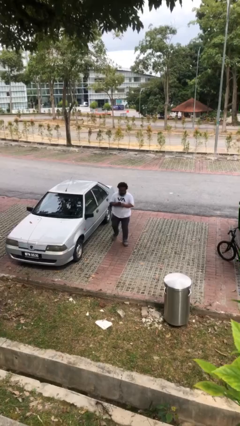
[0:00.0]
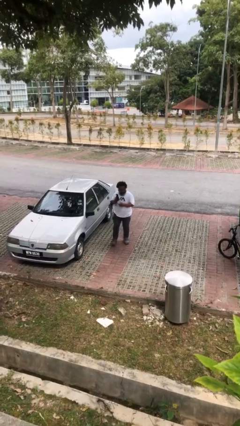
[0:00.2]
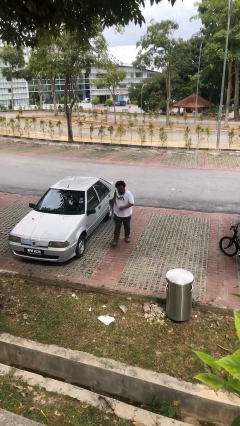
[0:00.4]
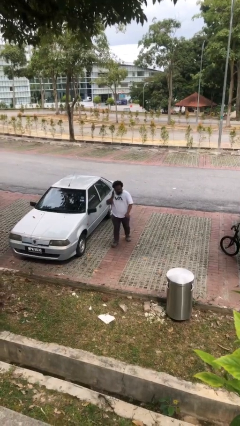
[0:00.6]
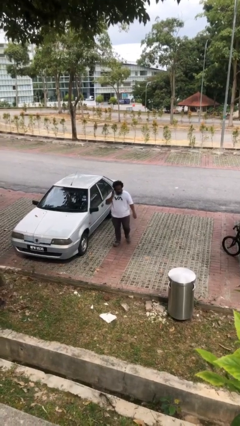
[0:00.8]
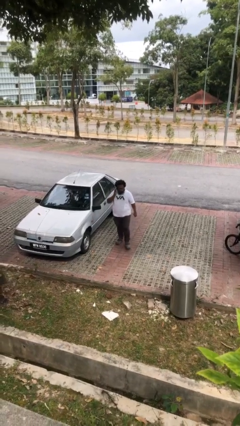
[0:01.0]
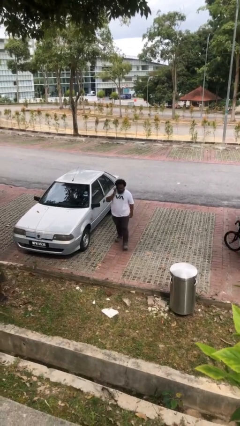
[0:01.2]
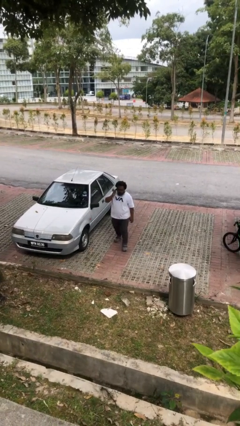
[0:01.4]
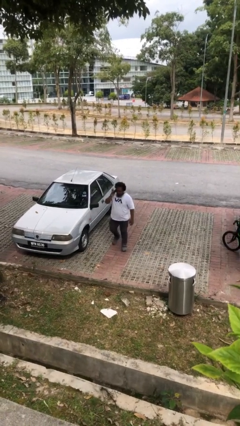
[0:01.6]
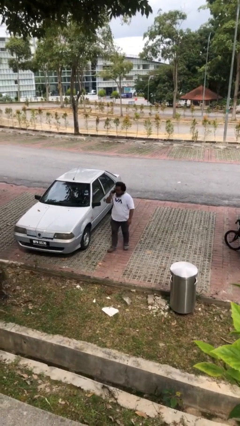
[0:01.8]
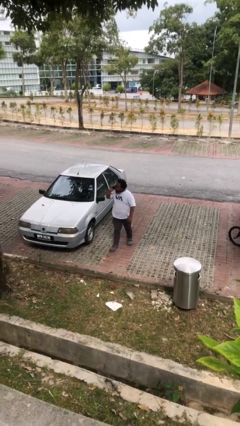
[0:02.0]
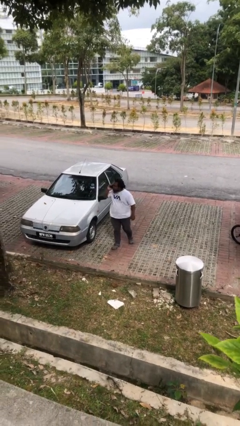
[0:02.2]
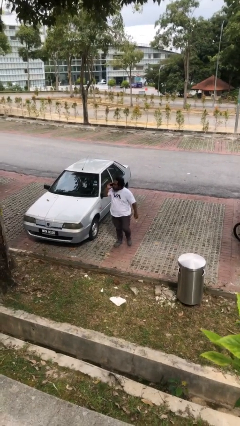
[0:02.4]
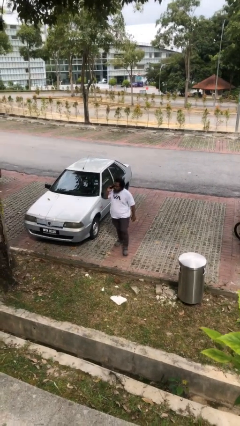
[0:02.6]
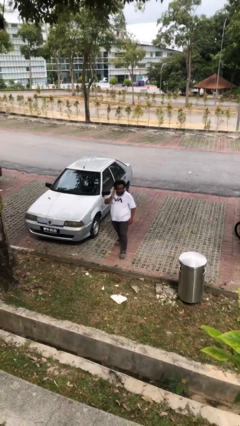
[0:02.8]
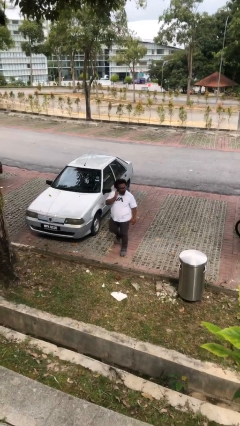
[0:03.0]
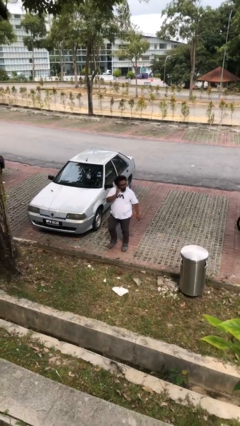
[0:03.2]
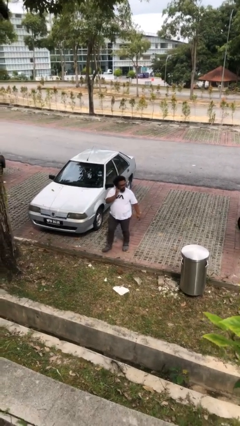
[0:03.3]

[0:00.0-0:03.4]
person talks on phone

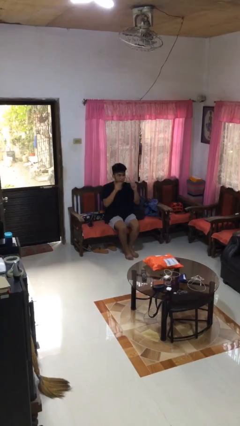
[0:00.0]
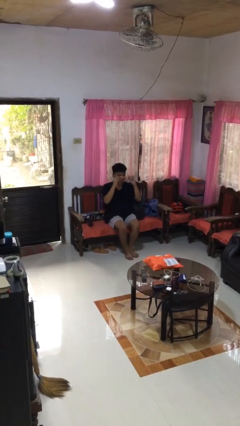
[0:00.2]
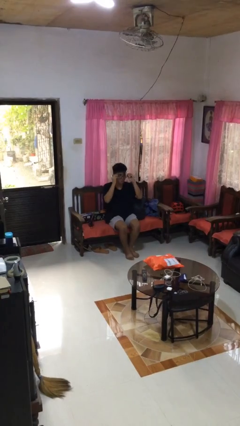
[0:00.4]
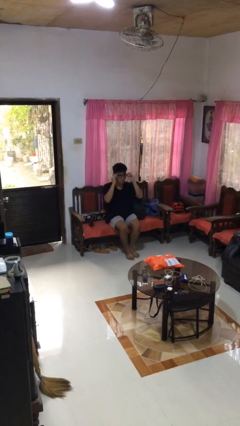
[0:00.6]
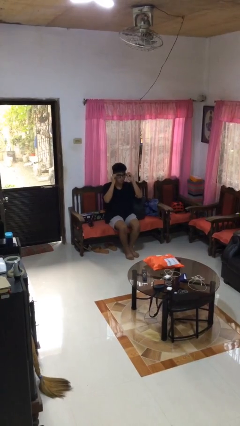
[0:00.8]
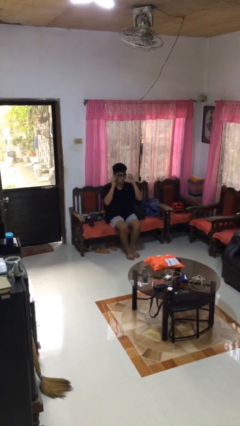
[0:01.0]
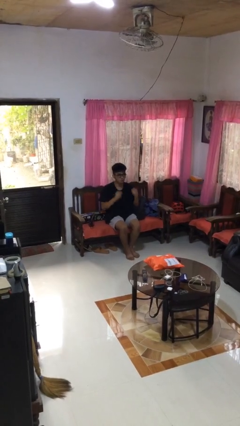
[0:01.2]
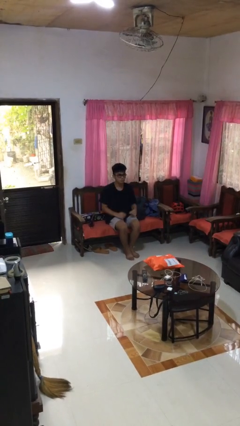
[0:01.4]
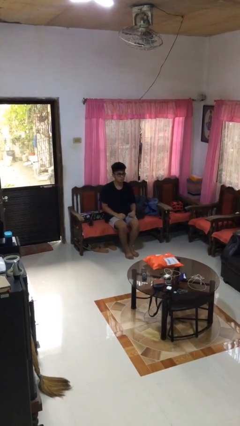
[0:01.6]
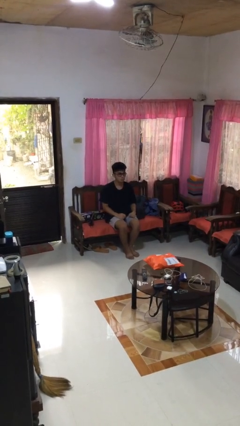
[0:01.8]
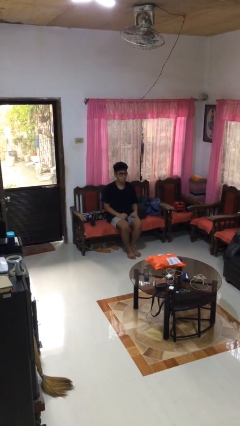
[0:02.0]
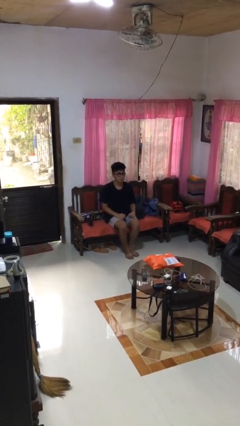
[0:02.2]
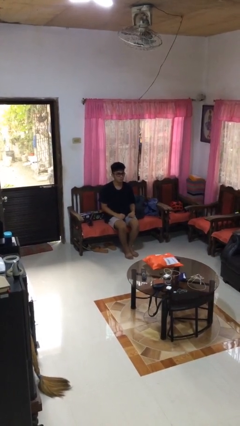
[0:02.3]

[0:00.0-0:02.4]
person puts on glasses

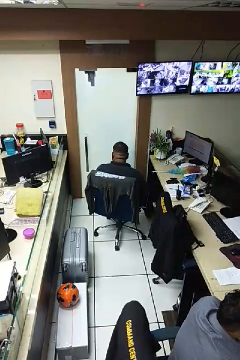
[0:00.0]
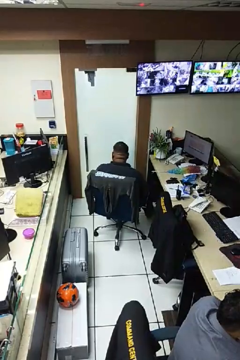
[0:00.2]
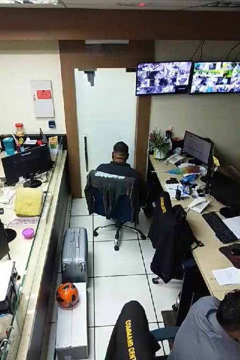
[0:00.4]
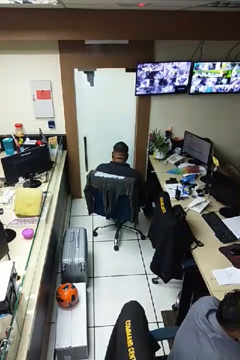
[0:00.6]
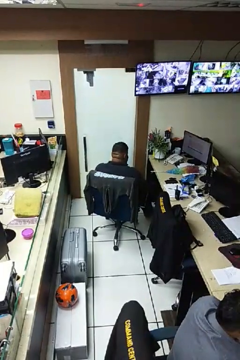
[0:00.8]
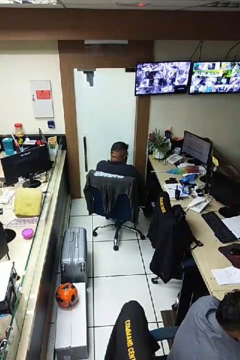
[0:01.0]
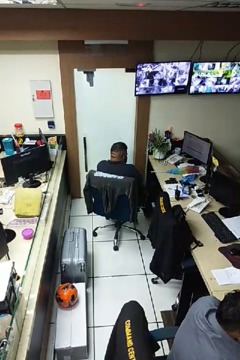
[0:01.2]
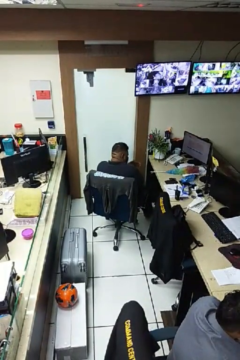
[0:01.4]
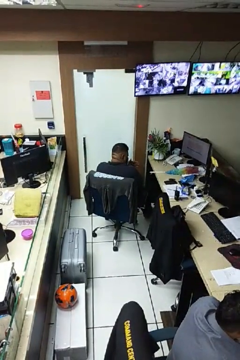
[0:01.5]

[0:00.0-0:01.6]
person swats bug

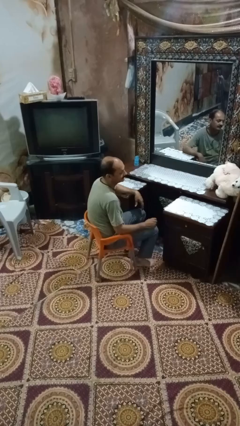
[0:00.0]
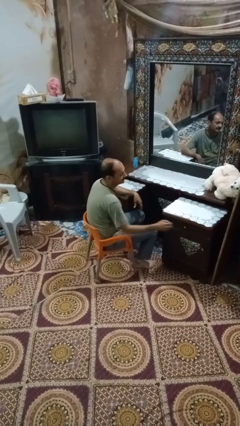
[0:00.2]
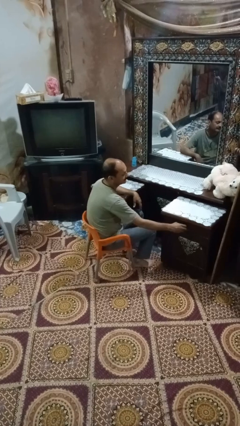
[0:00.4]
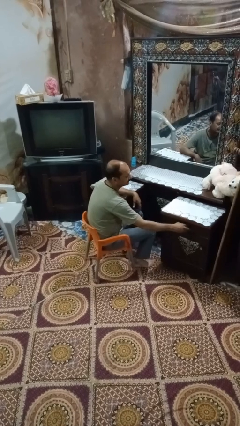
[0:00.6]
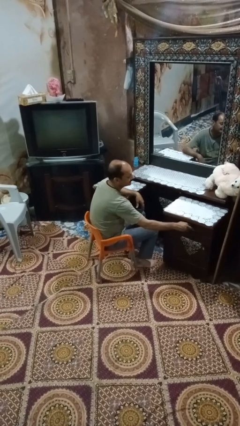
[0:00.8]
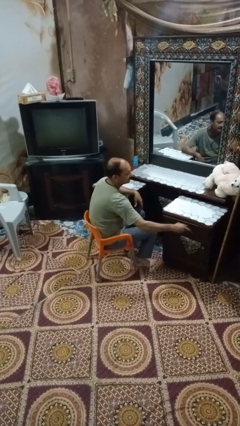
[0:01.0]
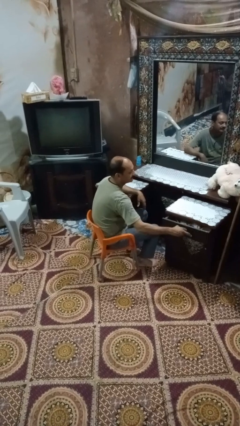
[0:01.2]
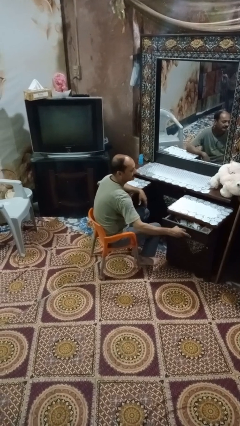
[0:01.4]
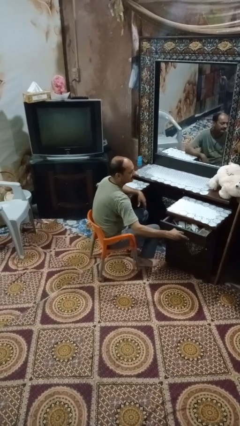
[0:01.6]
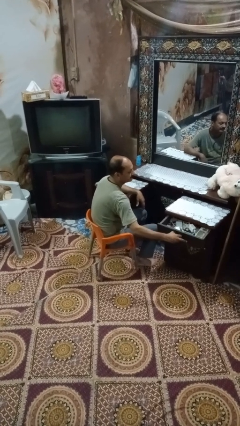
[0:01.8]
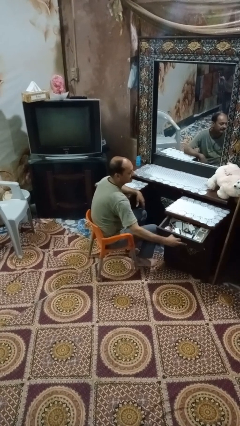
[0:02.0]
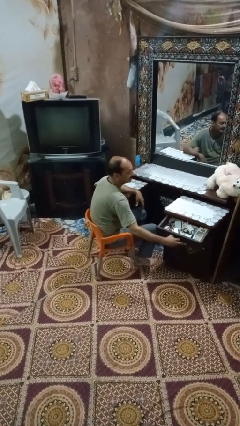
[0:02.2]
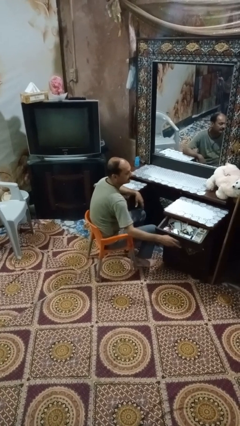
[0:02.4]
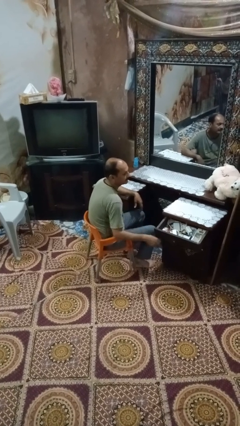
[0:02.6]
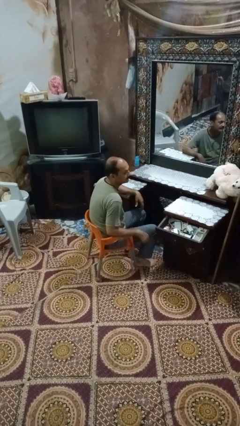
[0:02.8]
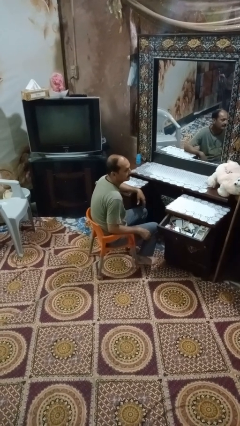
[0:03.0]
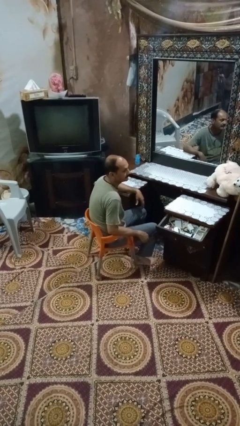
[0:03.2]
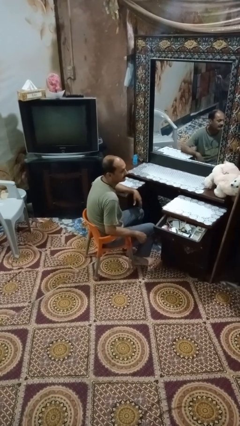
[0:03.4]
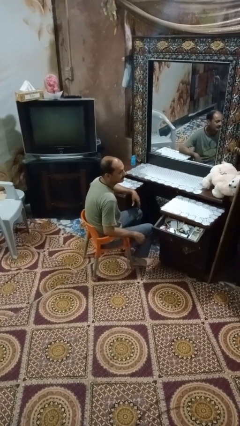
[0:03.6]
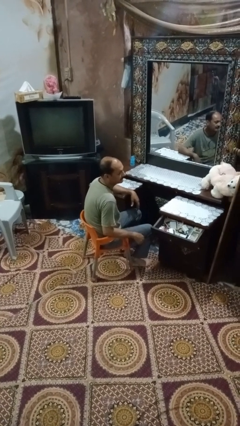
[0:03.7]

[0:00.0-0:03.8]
person opens dresser drawer

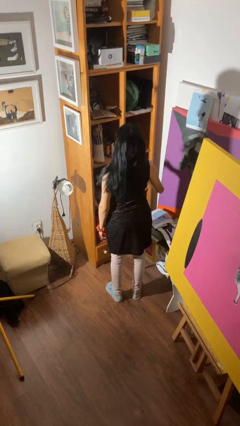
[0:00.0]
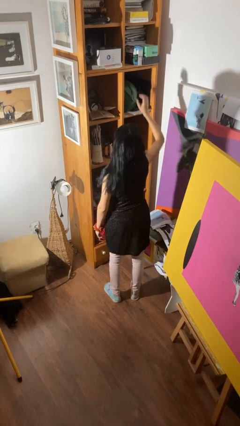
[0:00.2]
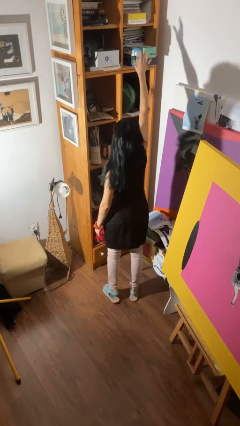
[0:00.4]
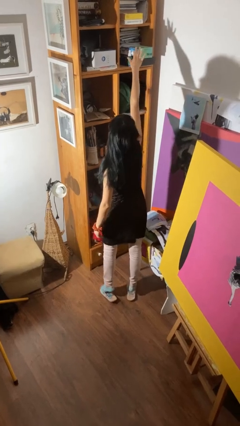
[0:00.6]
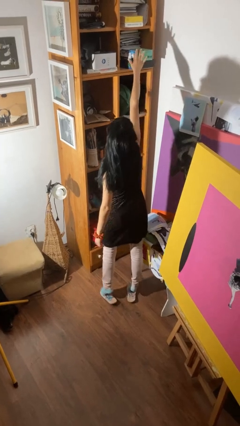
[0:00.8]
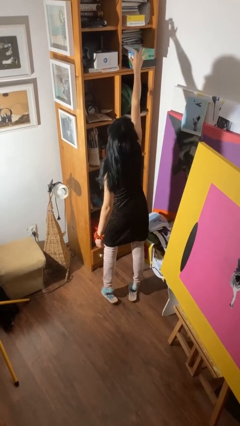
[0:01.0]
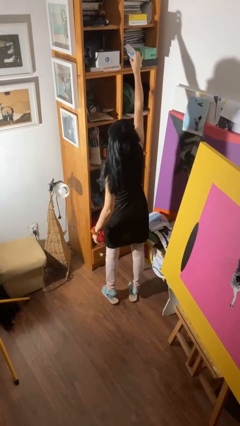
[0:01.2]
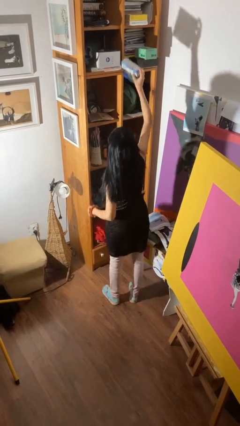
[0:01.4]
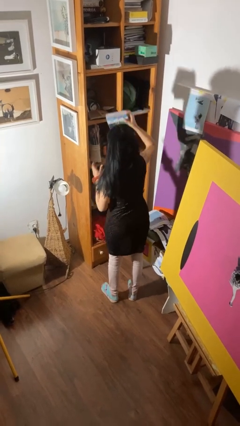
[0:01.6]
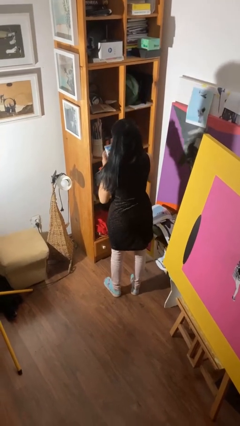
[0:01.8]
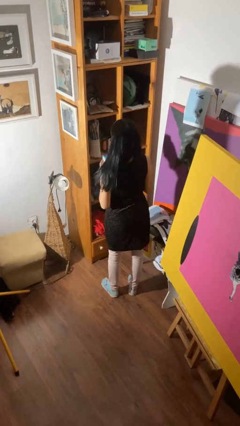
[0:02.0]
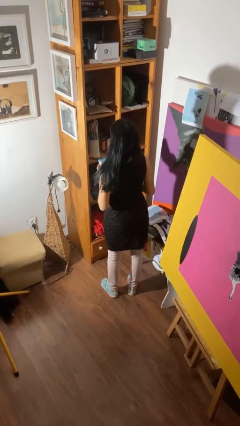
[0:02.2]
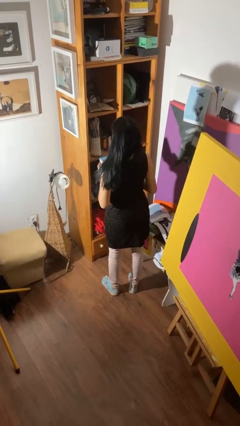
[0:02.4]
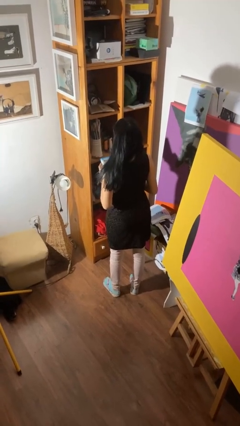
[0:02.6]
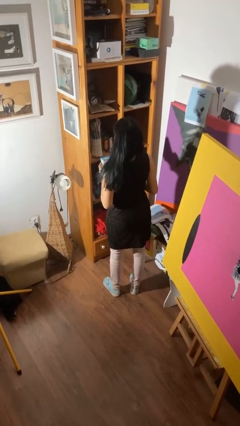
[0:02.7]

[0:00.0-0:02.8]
person picks up object from shelf

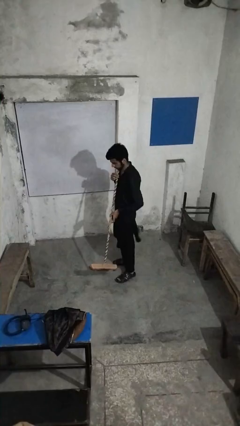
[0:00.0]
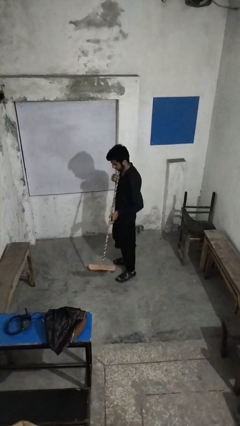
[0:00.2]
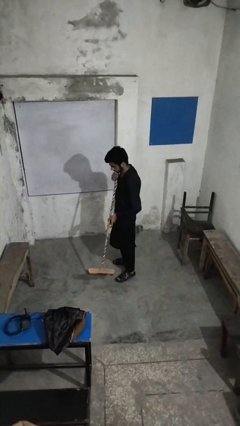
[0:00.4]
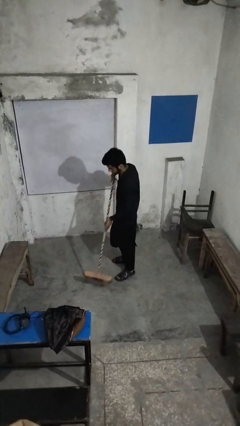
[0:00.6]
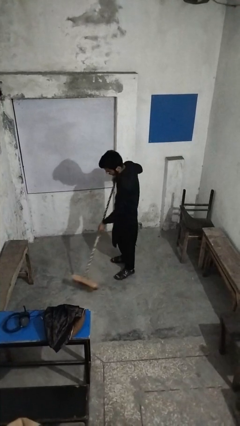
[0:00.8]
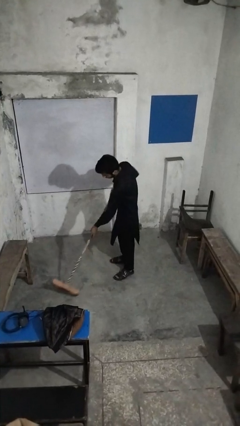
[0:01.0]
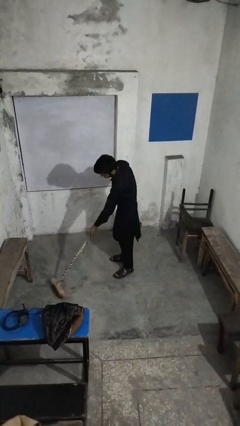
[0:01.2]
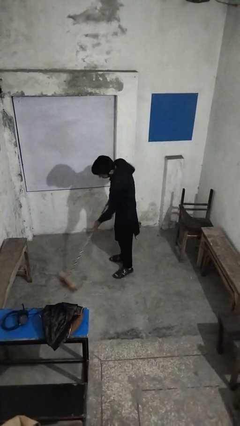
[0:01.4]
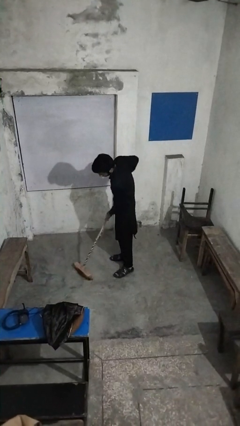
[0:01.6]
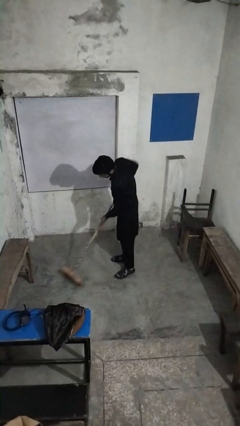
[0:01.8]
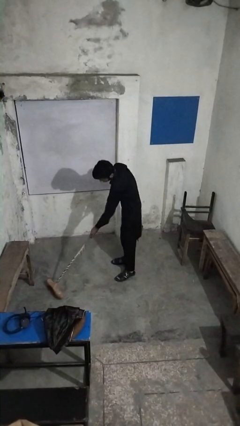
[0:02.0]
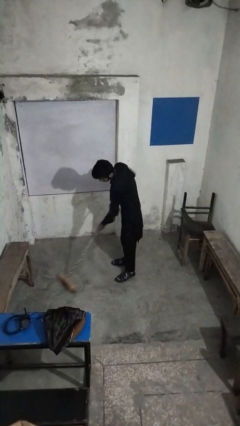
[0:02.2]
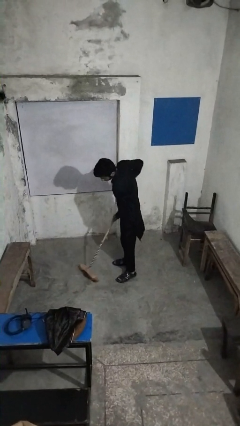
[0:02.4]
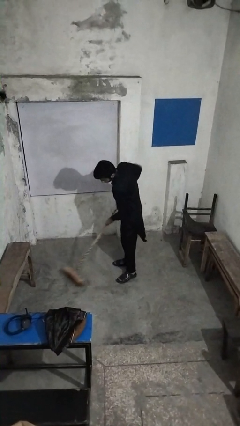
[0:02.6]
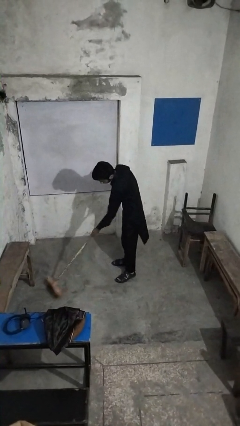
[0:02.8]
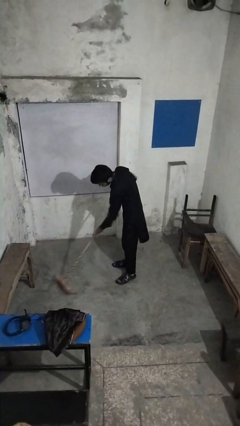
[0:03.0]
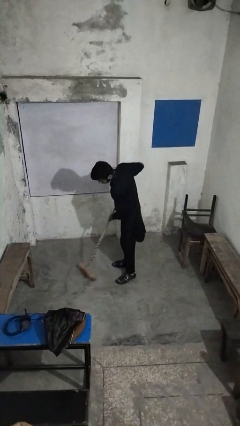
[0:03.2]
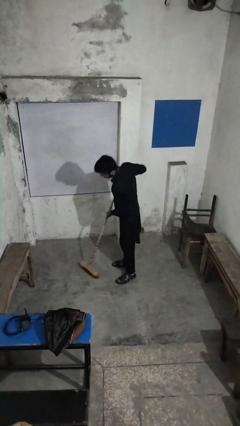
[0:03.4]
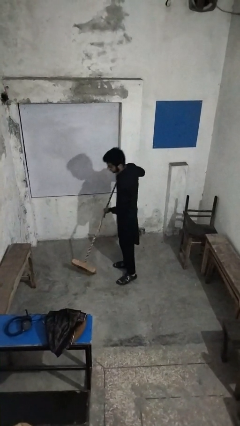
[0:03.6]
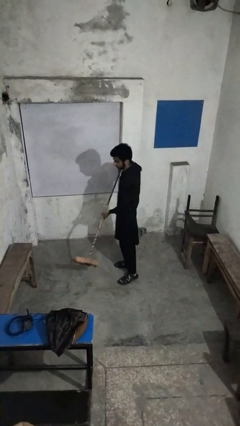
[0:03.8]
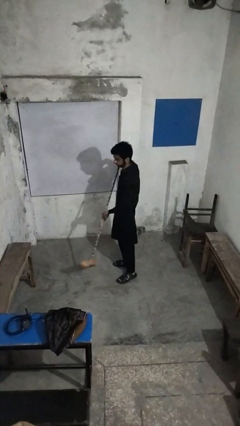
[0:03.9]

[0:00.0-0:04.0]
person sweeps floor
